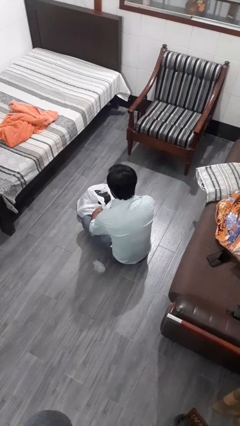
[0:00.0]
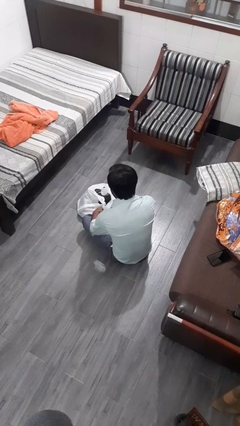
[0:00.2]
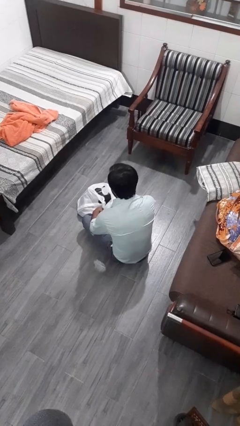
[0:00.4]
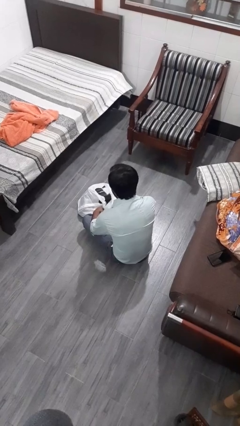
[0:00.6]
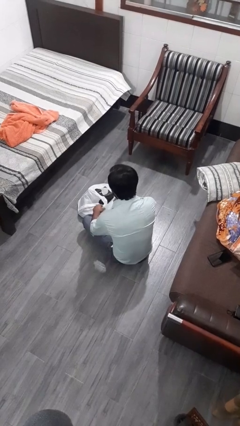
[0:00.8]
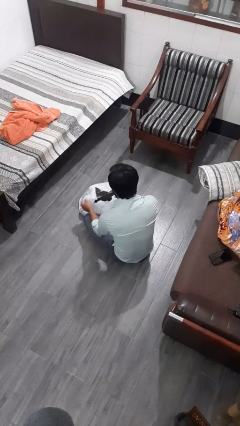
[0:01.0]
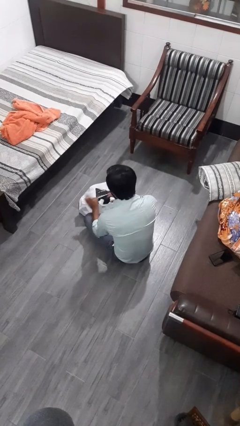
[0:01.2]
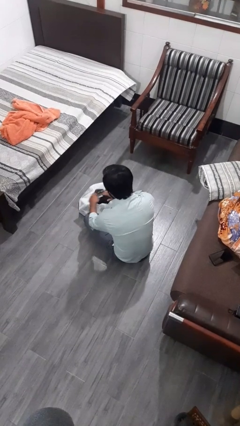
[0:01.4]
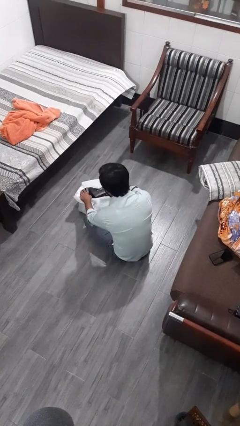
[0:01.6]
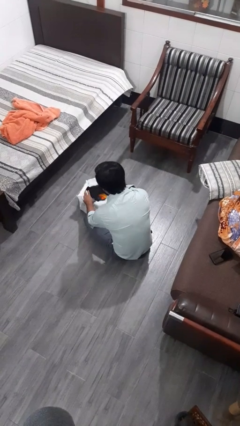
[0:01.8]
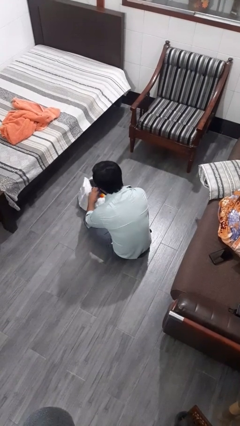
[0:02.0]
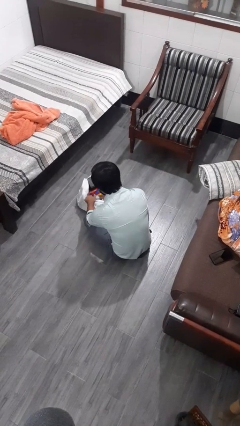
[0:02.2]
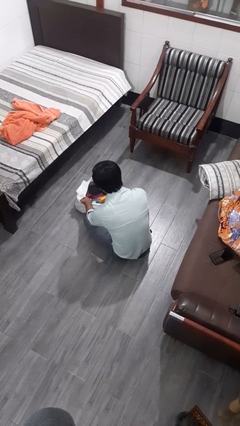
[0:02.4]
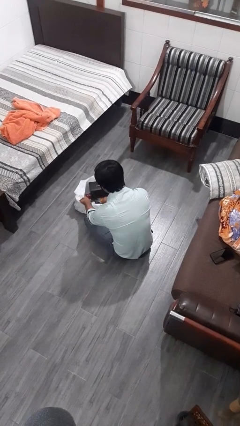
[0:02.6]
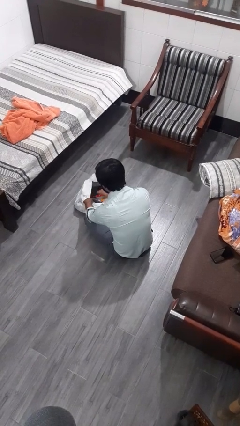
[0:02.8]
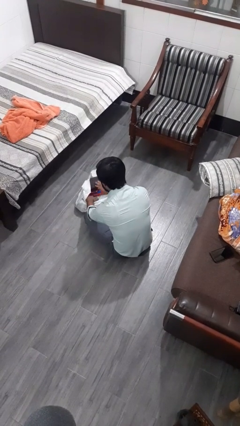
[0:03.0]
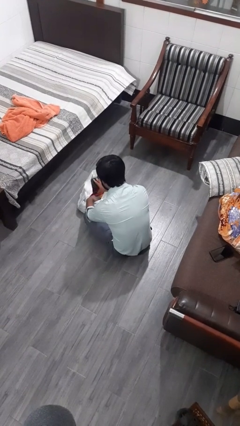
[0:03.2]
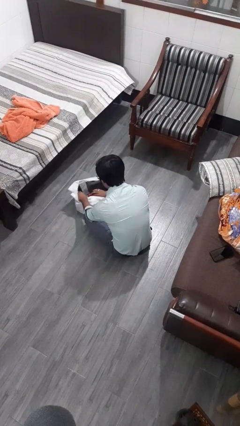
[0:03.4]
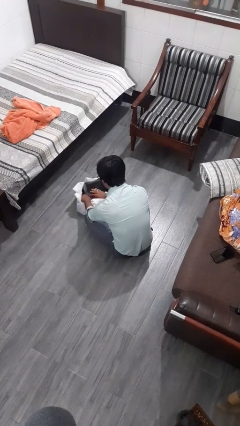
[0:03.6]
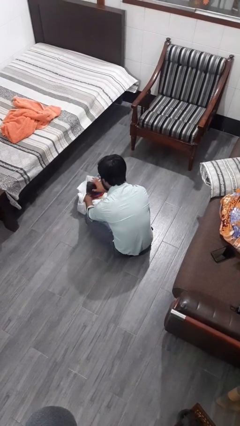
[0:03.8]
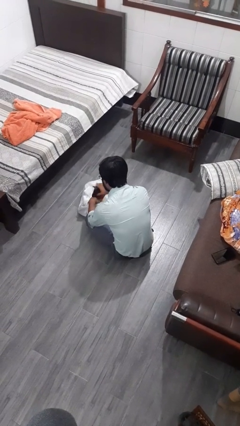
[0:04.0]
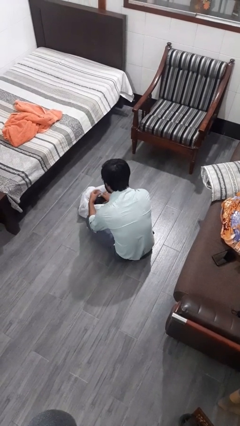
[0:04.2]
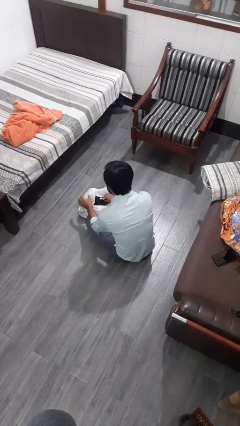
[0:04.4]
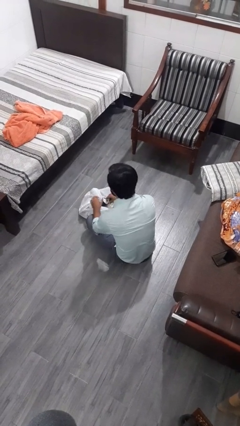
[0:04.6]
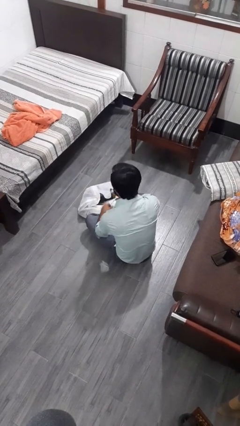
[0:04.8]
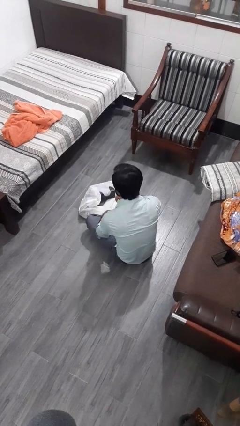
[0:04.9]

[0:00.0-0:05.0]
person searches in bag

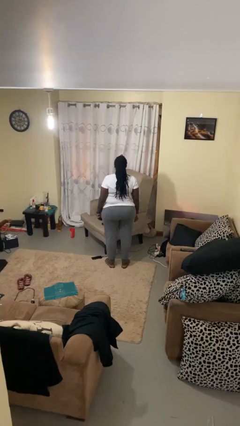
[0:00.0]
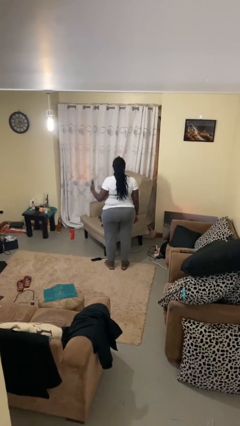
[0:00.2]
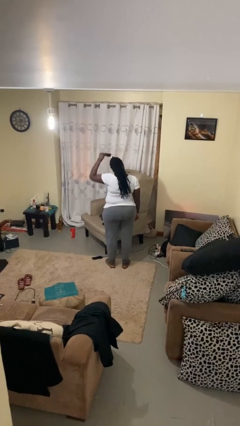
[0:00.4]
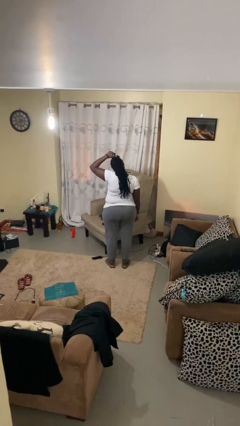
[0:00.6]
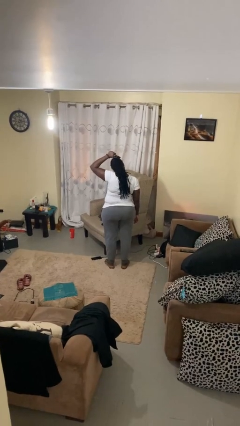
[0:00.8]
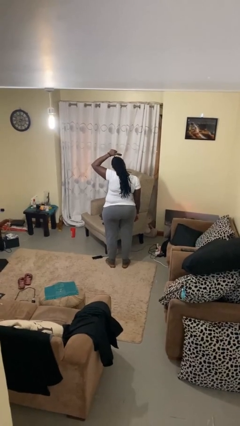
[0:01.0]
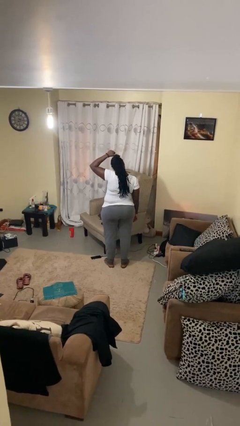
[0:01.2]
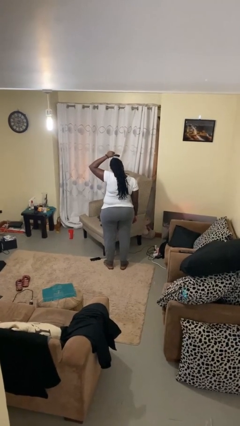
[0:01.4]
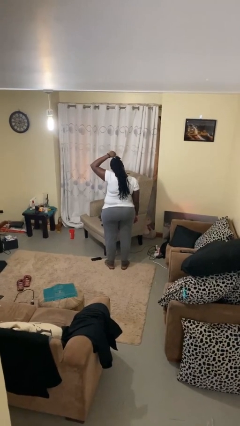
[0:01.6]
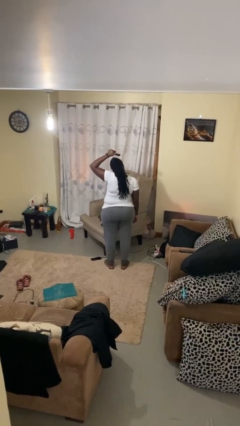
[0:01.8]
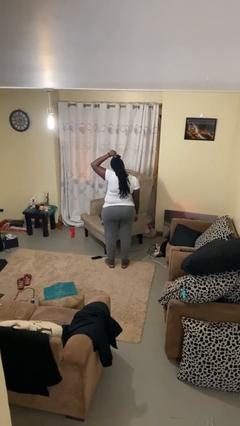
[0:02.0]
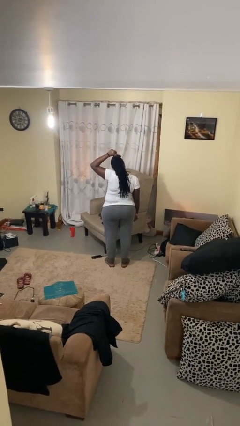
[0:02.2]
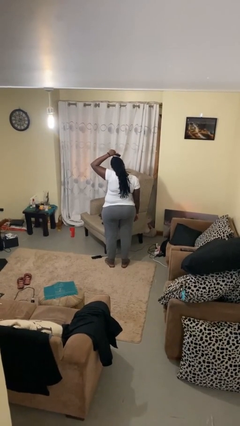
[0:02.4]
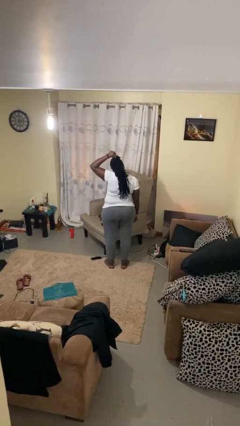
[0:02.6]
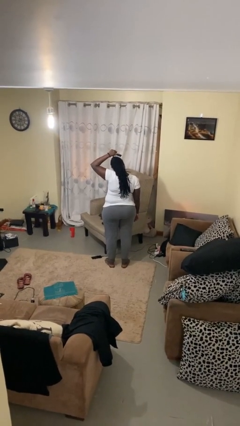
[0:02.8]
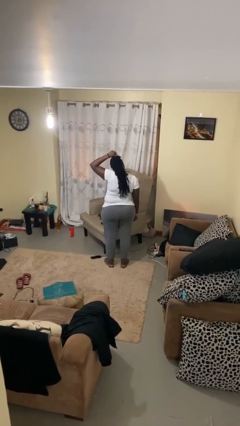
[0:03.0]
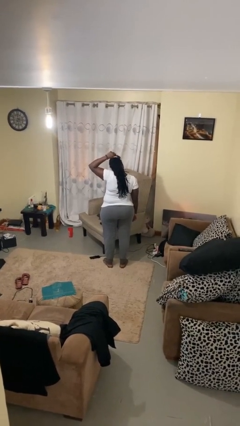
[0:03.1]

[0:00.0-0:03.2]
person brushes hair

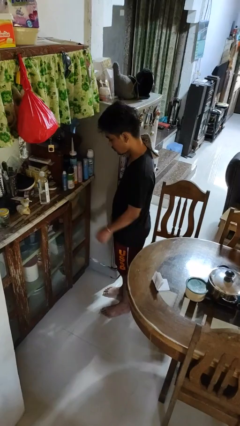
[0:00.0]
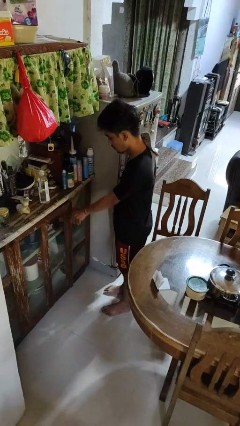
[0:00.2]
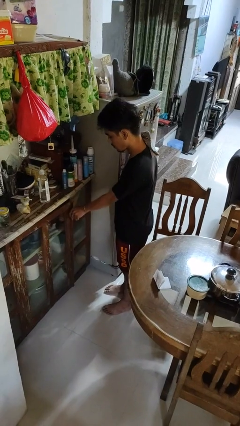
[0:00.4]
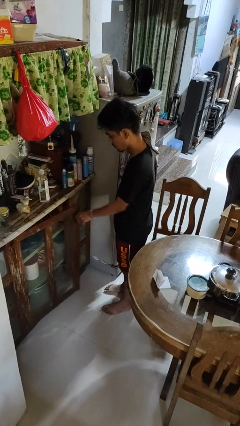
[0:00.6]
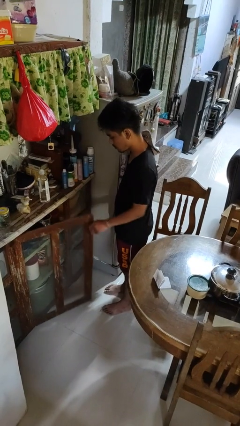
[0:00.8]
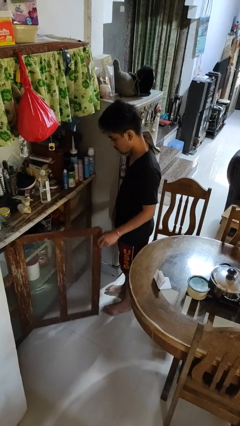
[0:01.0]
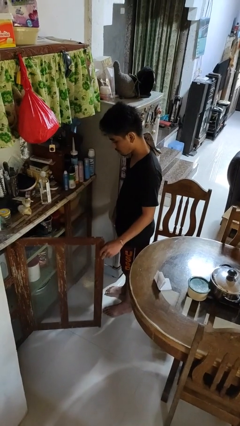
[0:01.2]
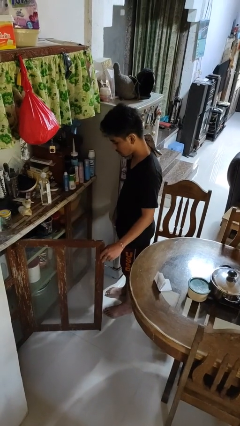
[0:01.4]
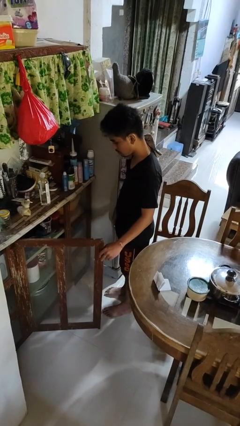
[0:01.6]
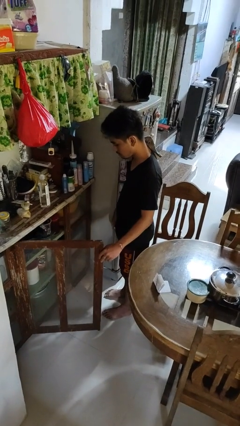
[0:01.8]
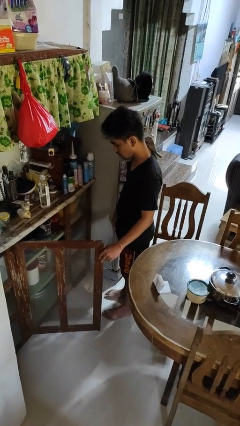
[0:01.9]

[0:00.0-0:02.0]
person opens cabinet

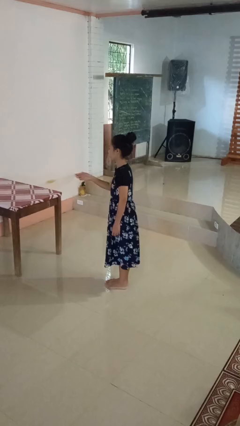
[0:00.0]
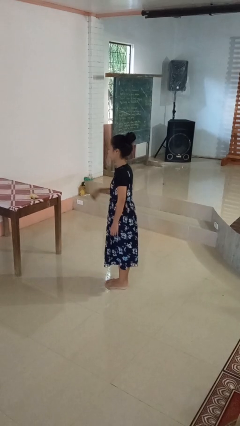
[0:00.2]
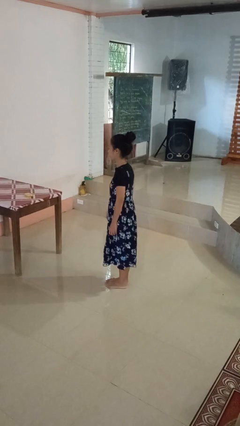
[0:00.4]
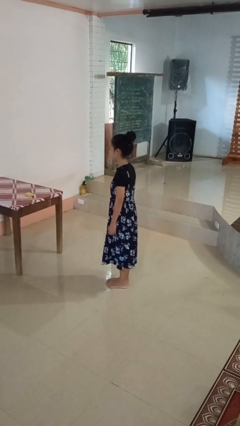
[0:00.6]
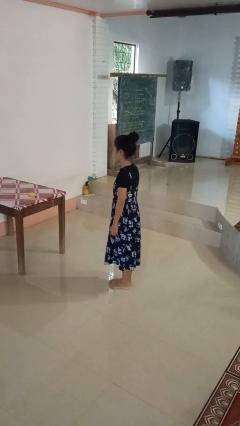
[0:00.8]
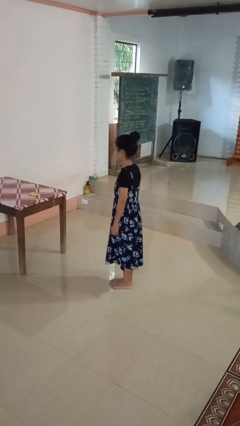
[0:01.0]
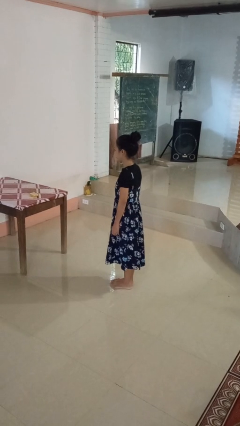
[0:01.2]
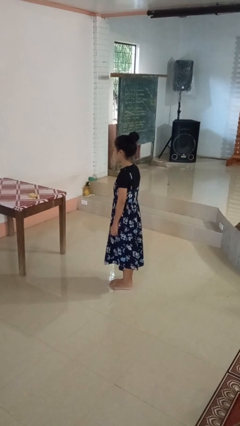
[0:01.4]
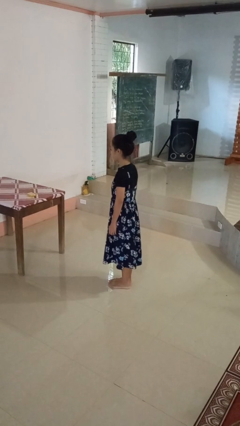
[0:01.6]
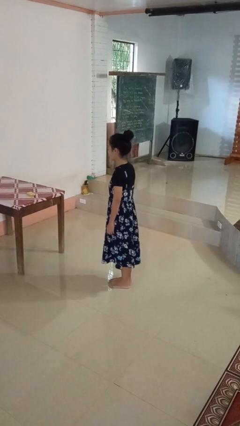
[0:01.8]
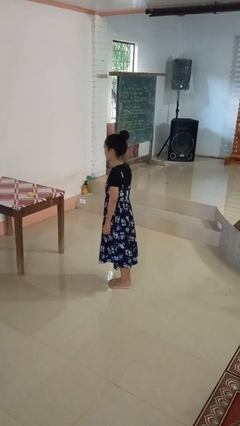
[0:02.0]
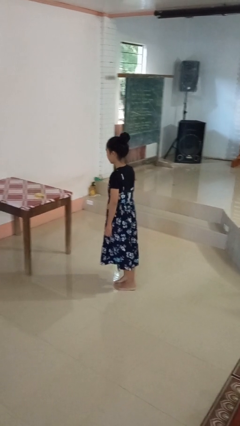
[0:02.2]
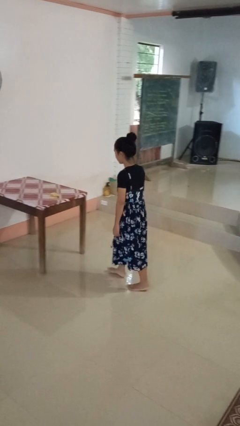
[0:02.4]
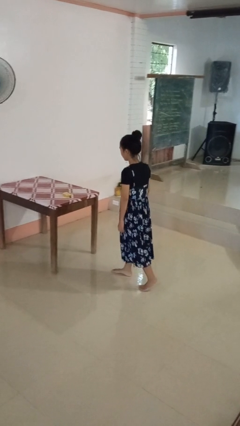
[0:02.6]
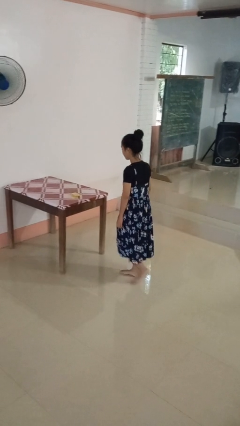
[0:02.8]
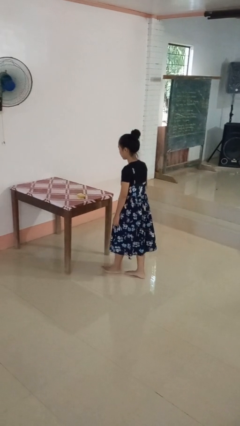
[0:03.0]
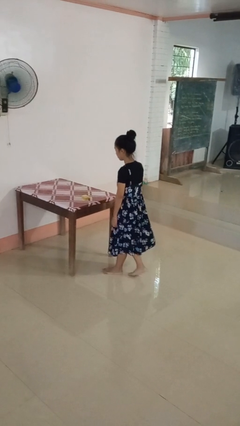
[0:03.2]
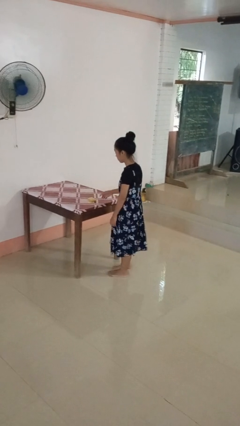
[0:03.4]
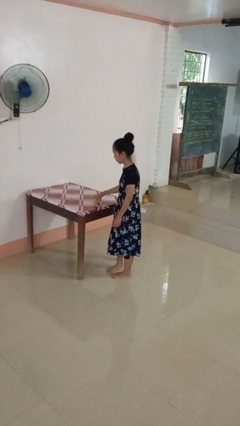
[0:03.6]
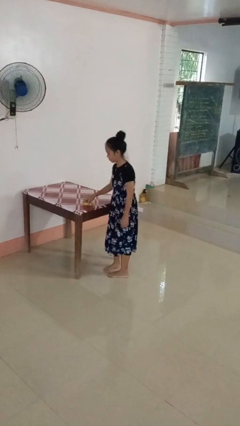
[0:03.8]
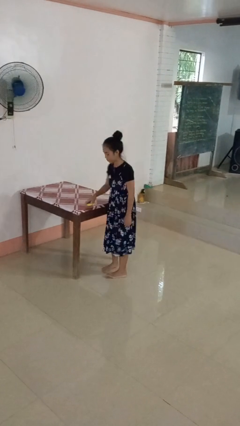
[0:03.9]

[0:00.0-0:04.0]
person throws object on table

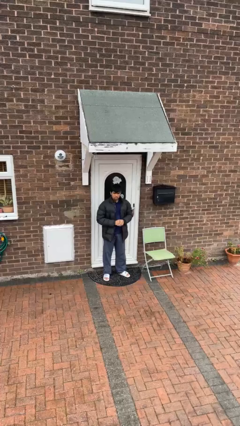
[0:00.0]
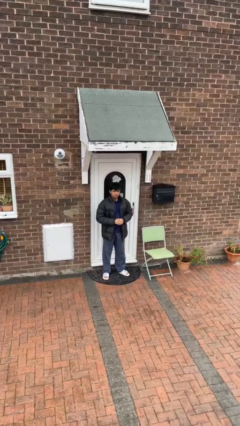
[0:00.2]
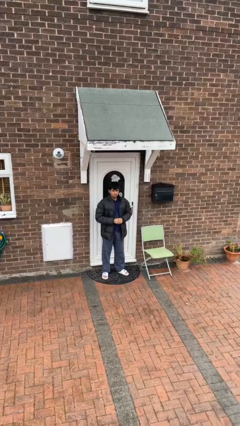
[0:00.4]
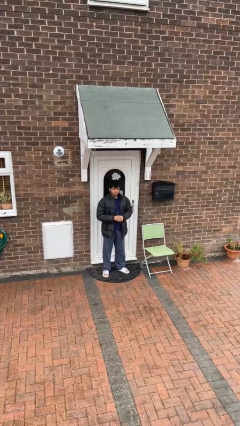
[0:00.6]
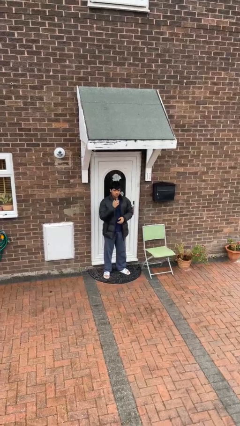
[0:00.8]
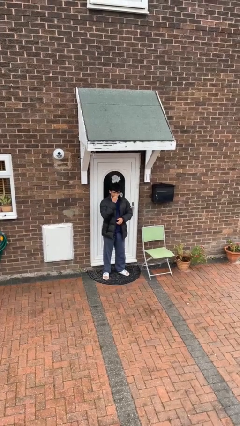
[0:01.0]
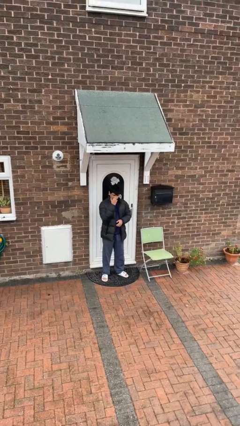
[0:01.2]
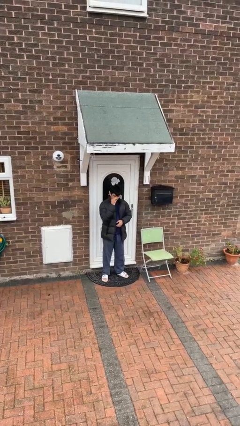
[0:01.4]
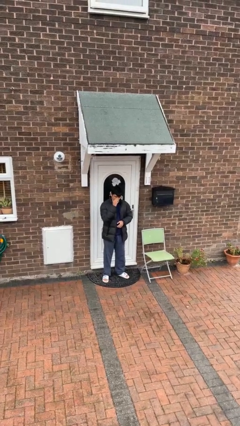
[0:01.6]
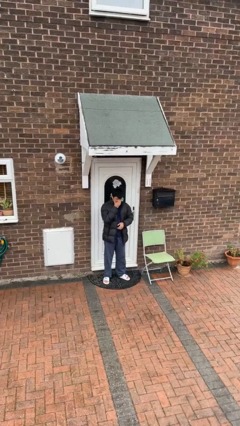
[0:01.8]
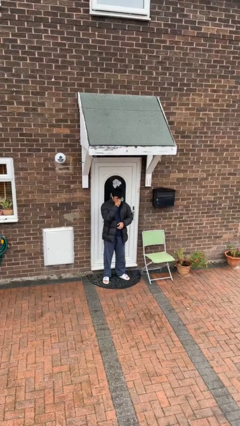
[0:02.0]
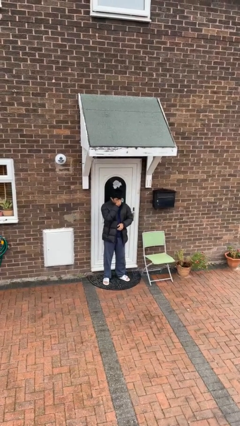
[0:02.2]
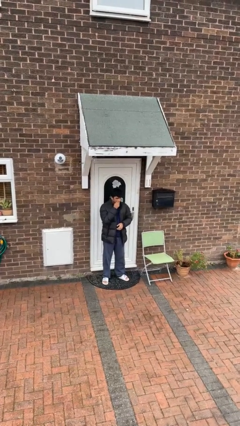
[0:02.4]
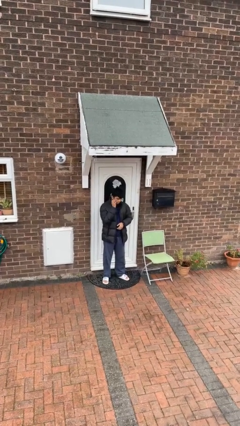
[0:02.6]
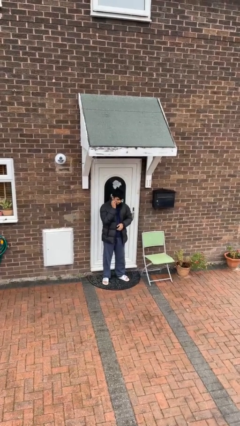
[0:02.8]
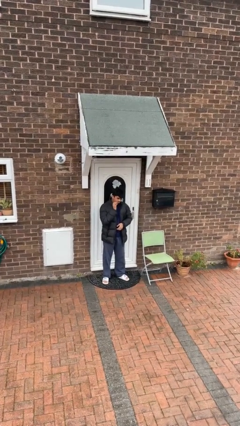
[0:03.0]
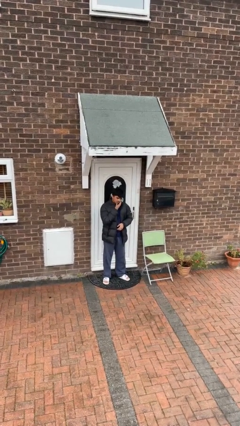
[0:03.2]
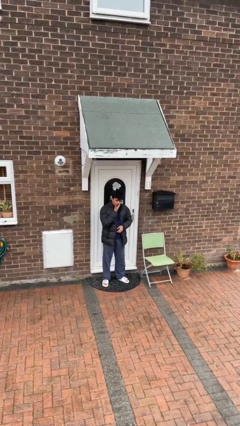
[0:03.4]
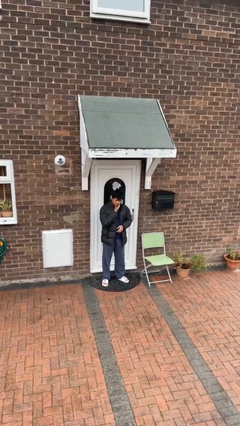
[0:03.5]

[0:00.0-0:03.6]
person scratches face
